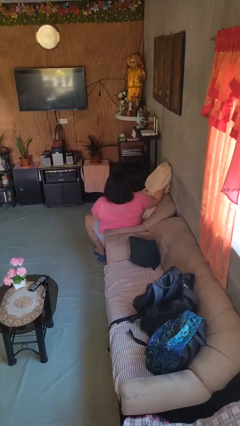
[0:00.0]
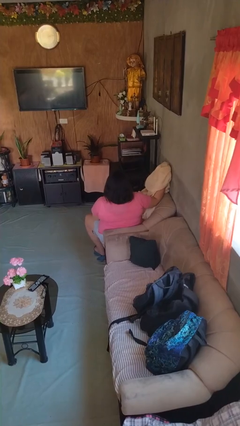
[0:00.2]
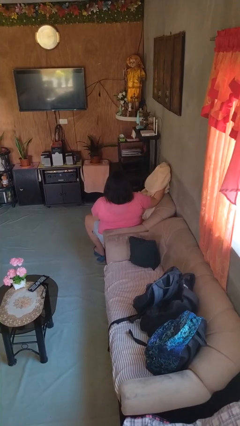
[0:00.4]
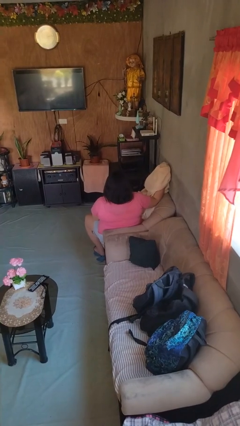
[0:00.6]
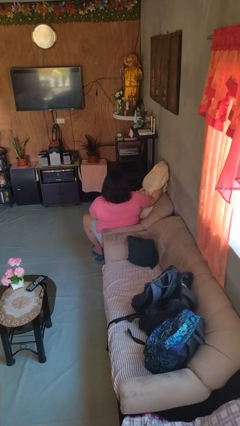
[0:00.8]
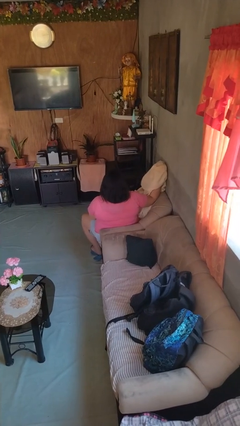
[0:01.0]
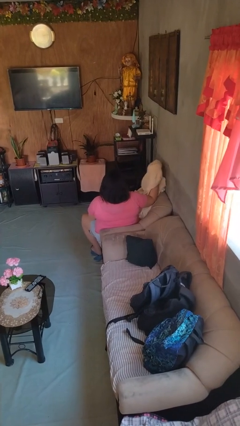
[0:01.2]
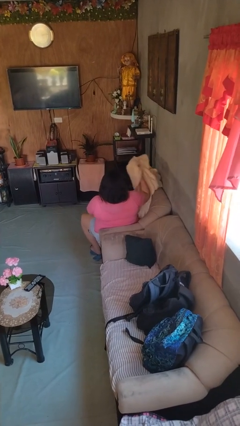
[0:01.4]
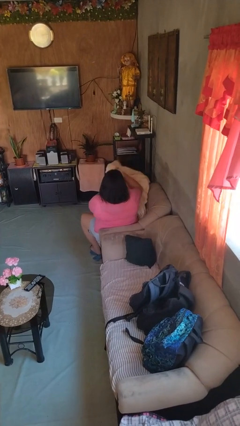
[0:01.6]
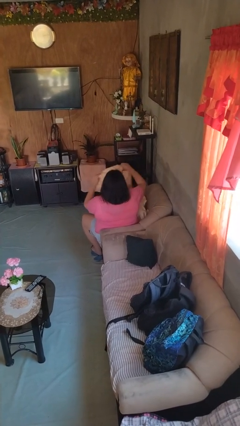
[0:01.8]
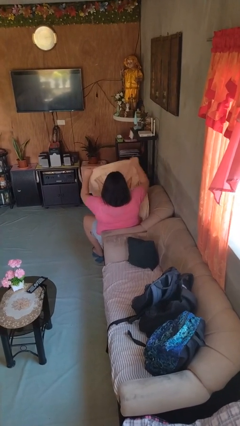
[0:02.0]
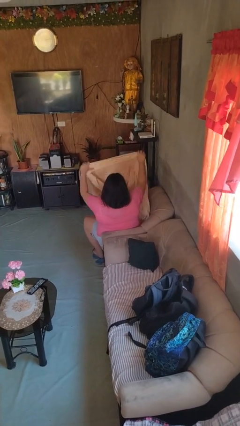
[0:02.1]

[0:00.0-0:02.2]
person covers with blanket

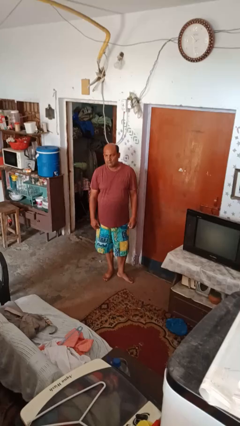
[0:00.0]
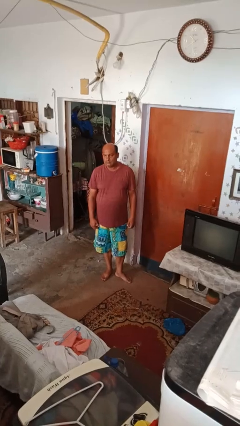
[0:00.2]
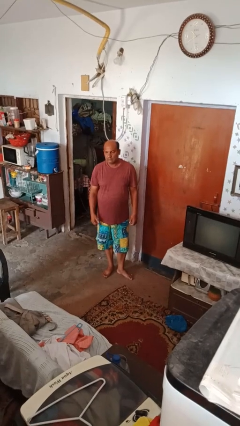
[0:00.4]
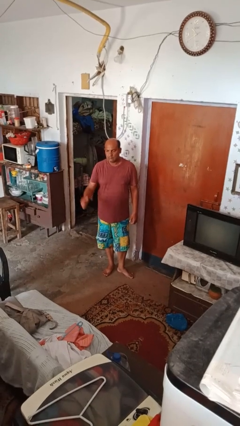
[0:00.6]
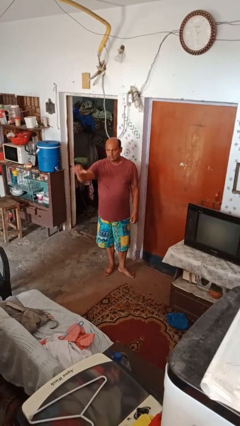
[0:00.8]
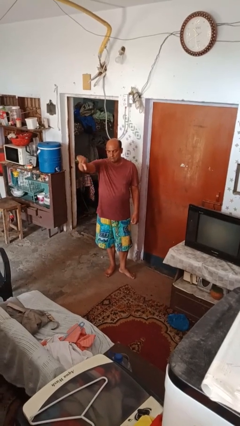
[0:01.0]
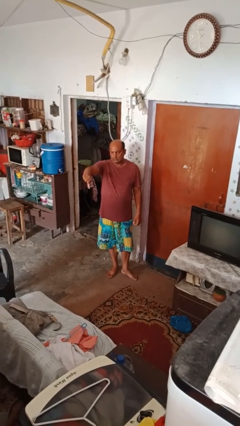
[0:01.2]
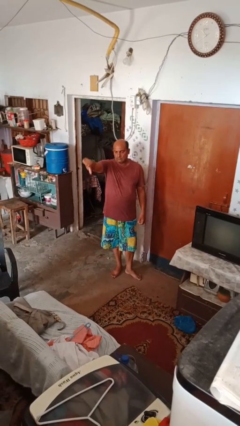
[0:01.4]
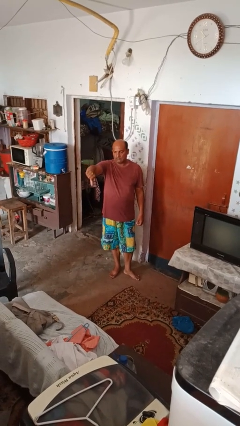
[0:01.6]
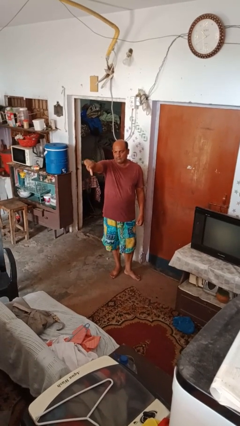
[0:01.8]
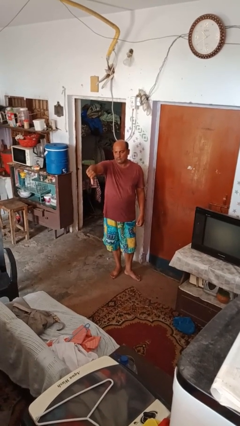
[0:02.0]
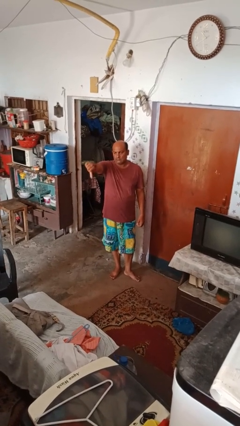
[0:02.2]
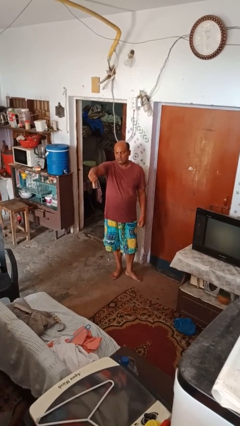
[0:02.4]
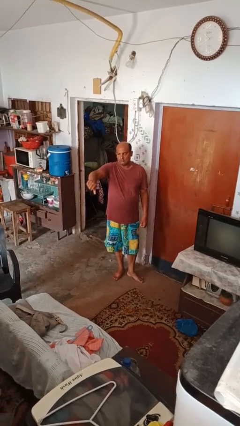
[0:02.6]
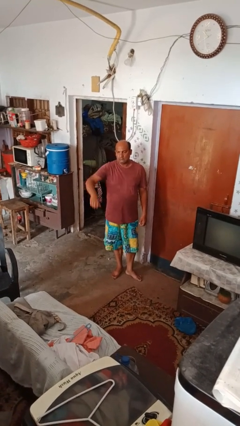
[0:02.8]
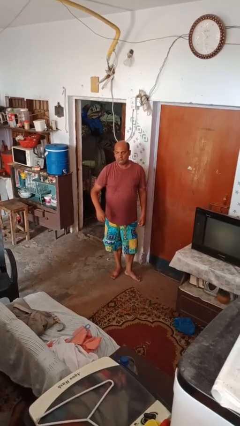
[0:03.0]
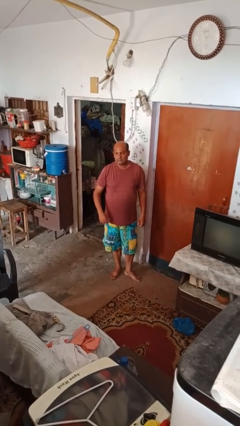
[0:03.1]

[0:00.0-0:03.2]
person gestures thumbs down

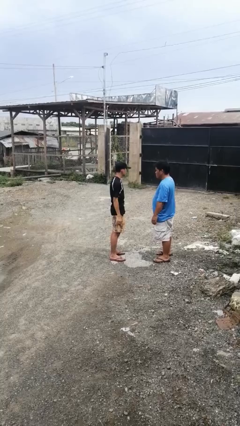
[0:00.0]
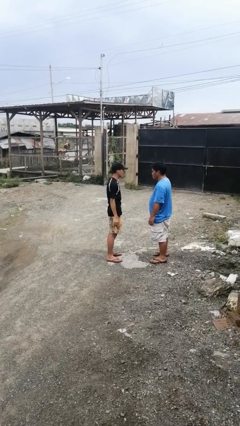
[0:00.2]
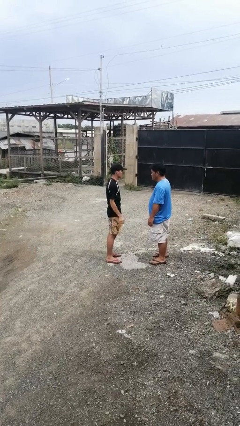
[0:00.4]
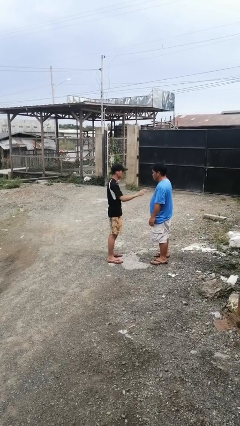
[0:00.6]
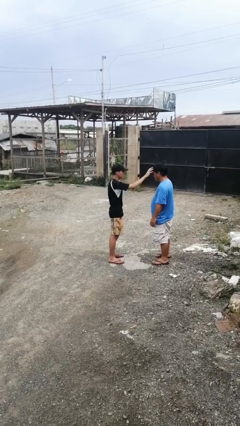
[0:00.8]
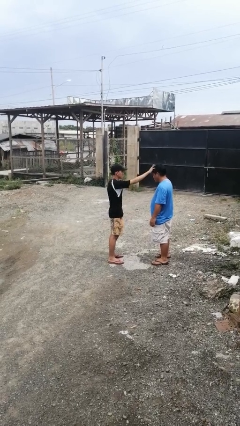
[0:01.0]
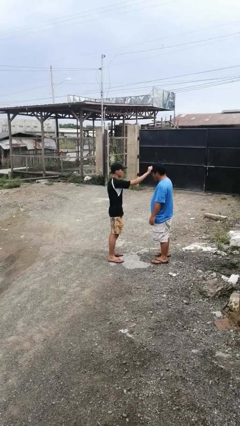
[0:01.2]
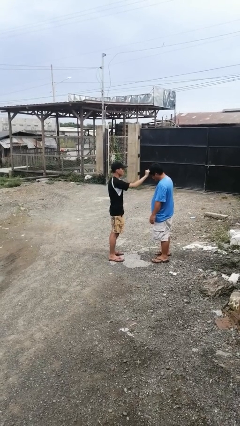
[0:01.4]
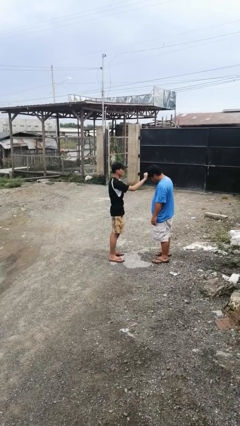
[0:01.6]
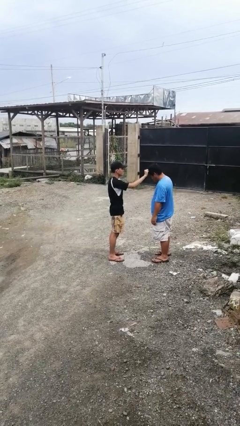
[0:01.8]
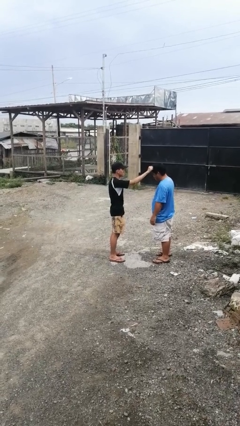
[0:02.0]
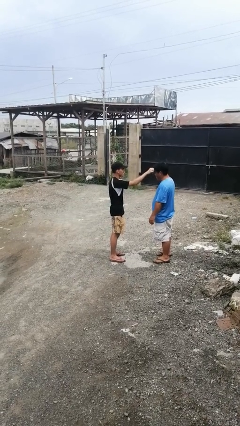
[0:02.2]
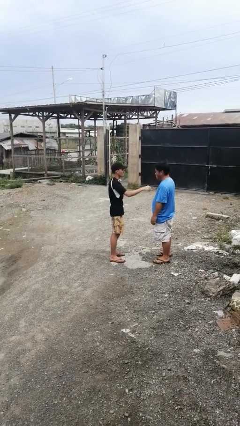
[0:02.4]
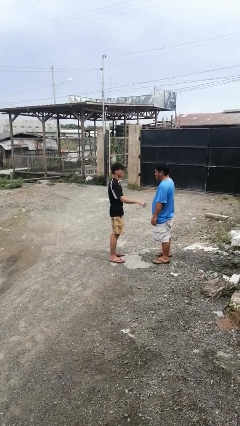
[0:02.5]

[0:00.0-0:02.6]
person grabs person by hair

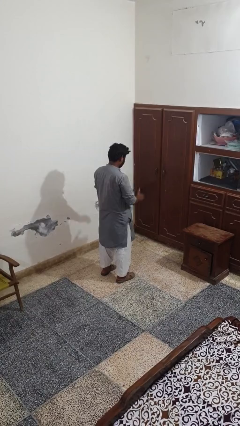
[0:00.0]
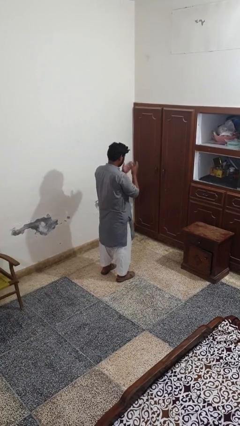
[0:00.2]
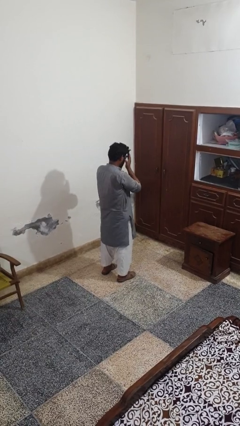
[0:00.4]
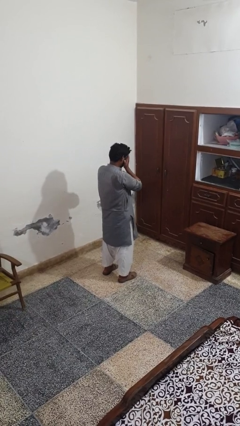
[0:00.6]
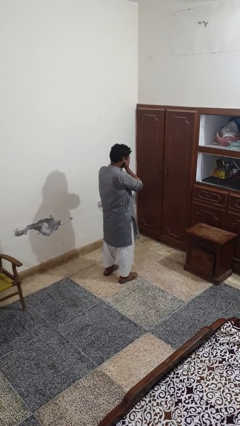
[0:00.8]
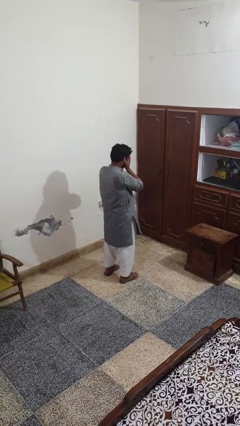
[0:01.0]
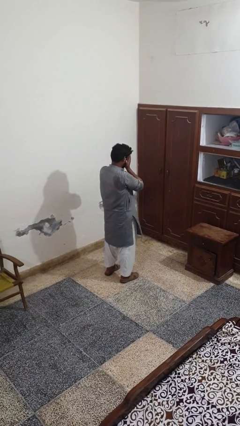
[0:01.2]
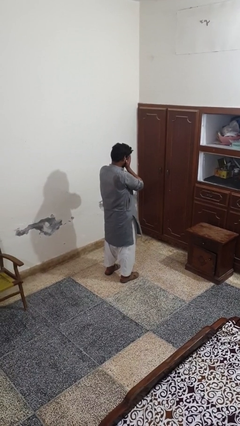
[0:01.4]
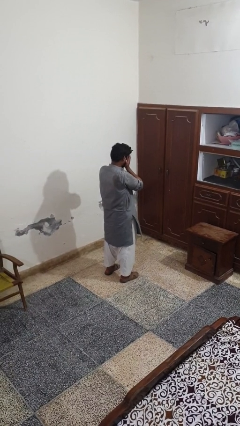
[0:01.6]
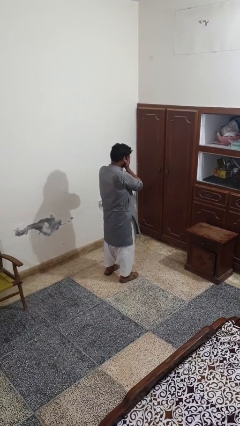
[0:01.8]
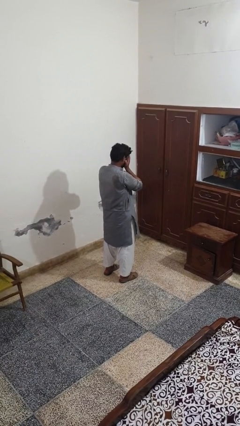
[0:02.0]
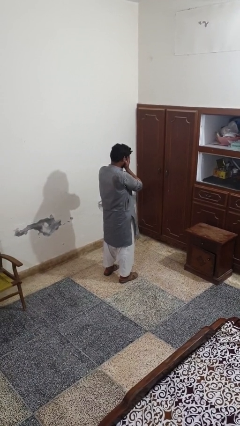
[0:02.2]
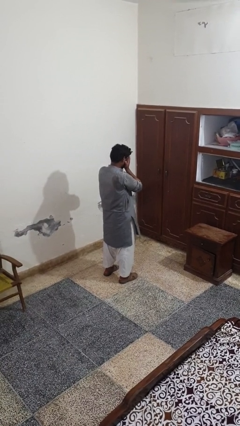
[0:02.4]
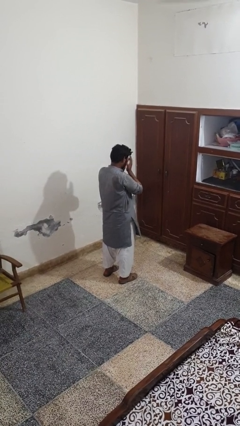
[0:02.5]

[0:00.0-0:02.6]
person covers face with hands

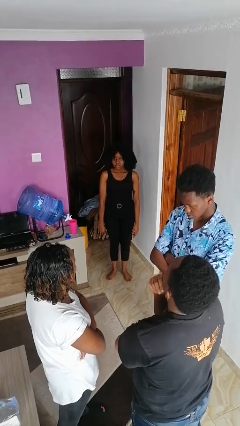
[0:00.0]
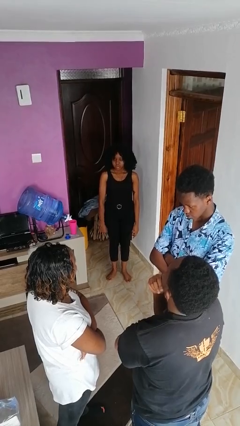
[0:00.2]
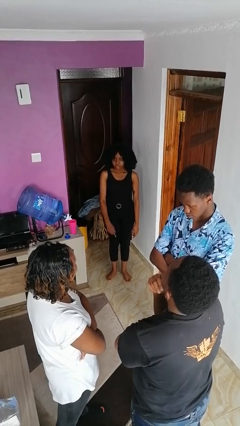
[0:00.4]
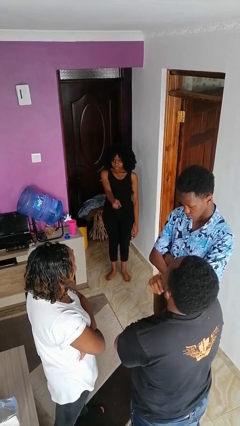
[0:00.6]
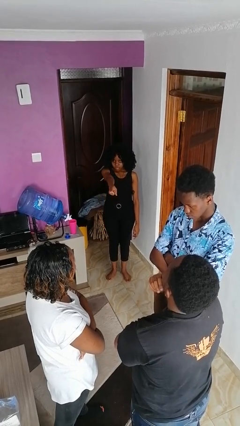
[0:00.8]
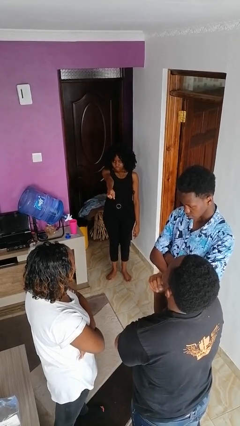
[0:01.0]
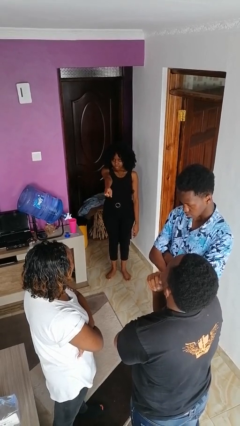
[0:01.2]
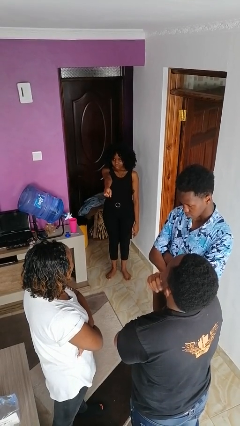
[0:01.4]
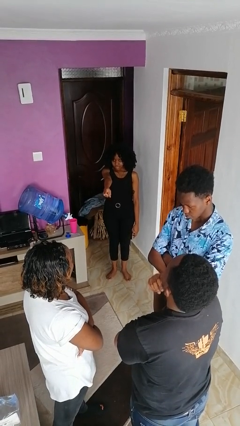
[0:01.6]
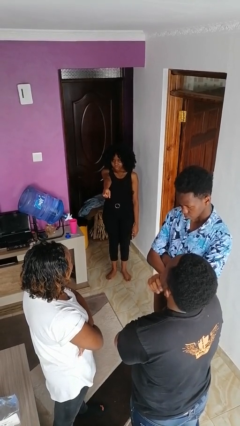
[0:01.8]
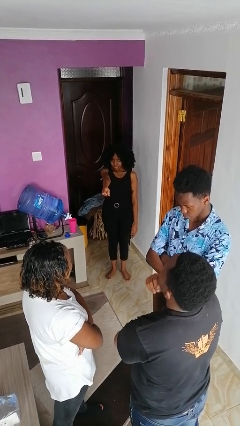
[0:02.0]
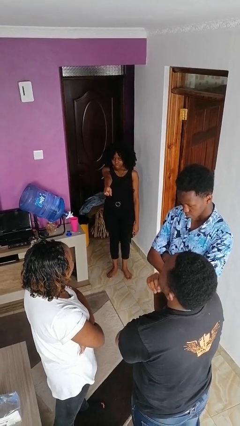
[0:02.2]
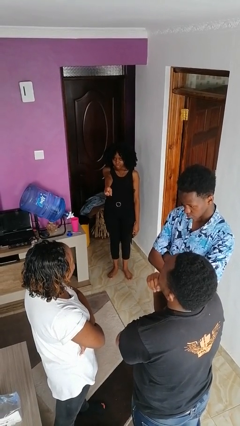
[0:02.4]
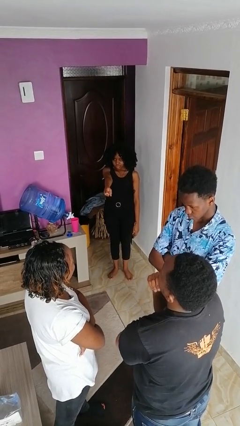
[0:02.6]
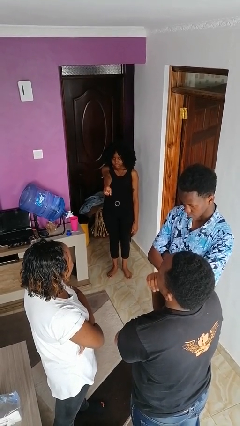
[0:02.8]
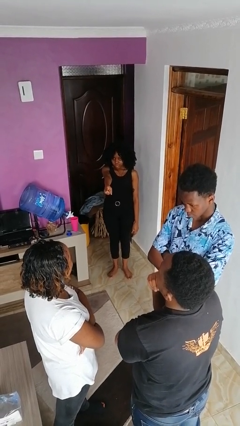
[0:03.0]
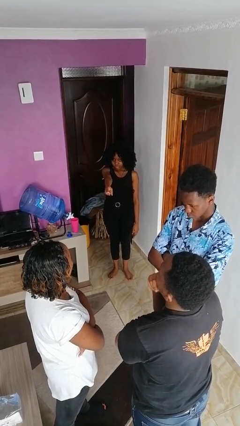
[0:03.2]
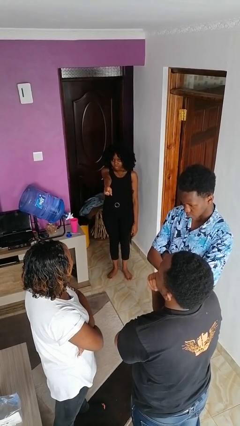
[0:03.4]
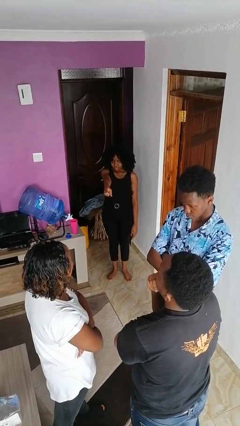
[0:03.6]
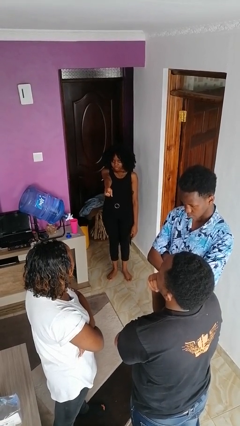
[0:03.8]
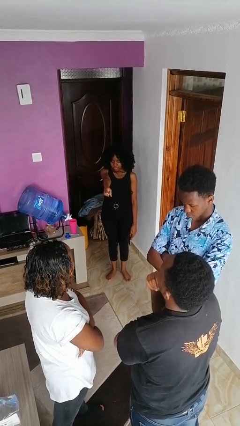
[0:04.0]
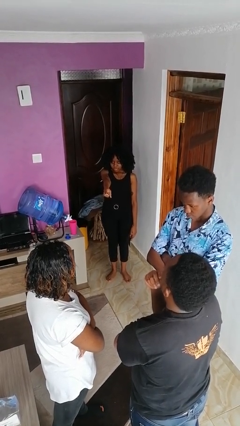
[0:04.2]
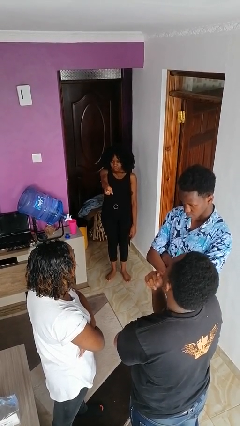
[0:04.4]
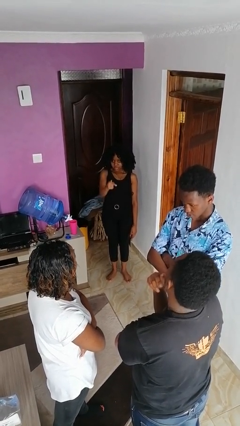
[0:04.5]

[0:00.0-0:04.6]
person points at person

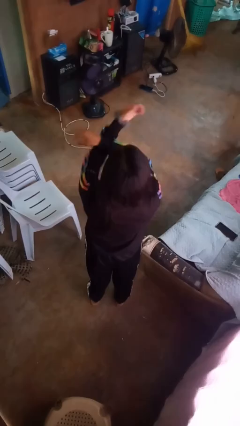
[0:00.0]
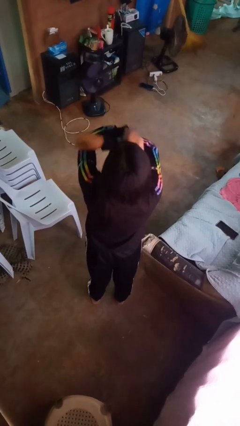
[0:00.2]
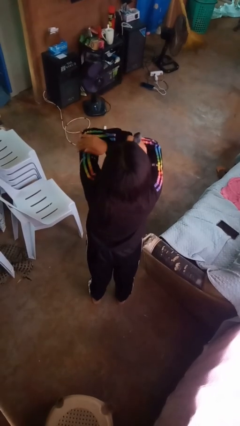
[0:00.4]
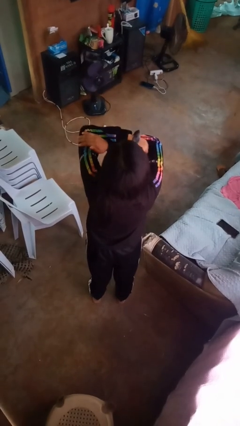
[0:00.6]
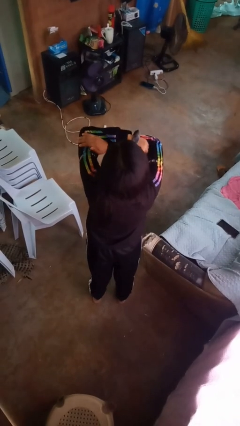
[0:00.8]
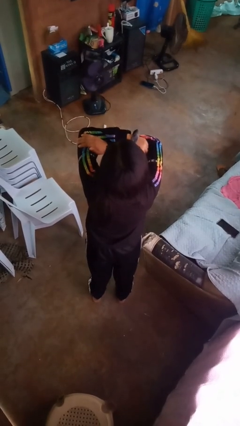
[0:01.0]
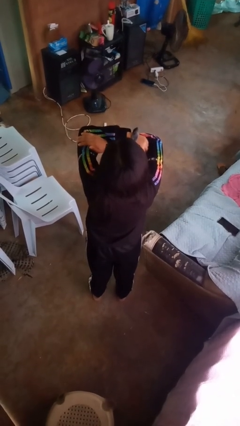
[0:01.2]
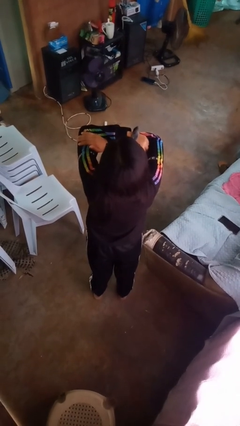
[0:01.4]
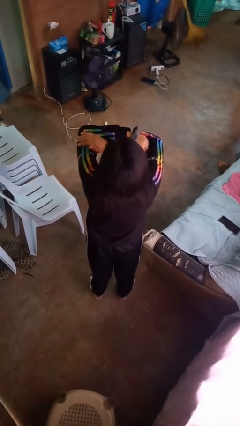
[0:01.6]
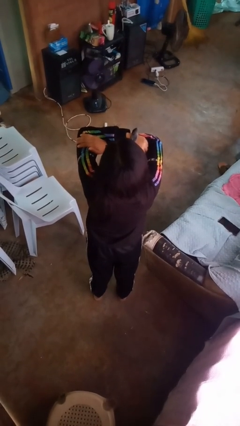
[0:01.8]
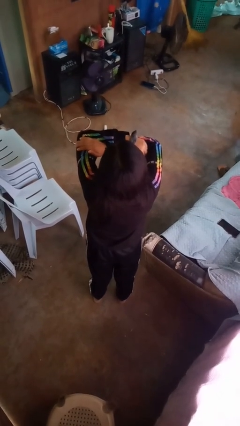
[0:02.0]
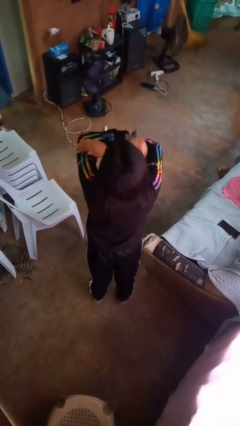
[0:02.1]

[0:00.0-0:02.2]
person gestures arms x
